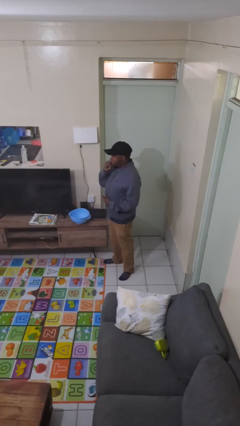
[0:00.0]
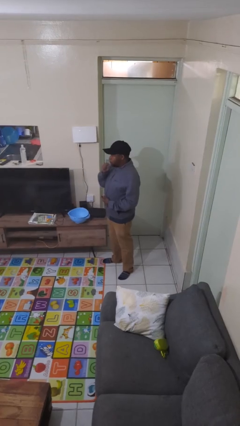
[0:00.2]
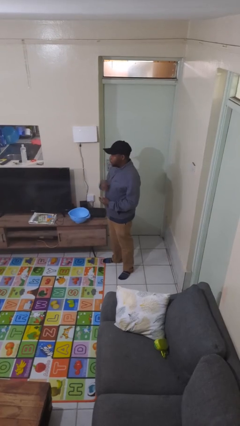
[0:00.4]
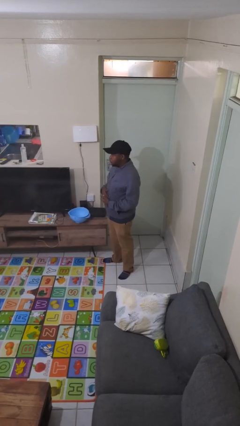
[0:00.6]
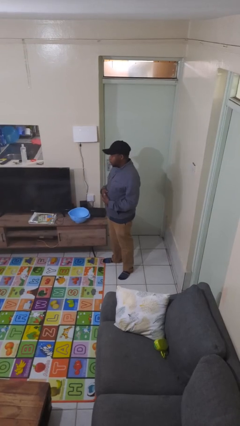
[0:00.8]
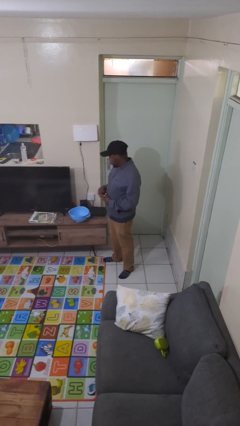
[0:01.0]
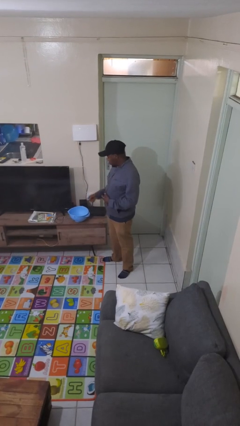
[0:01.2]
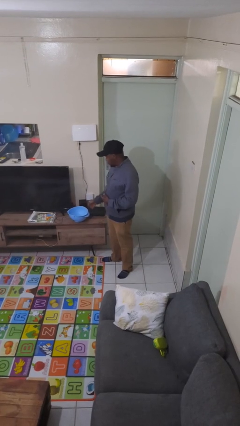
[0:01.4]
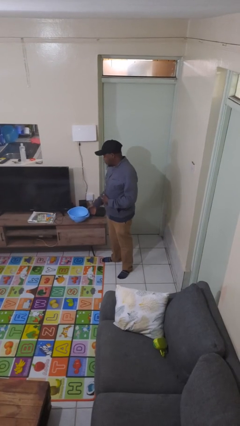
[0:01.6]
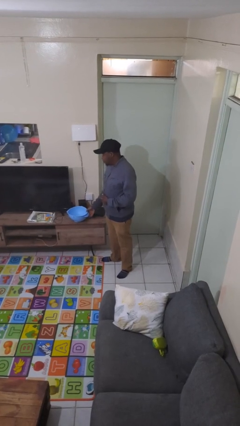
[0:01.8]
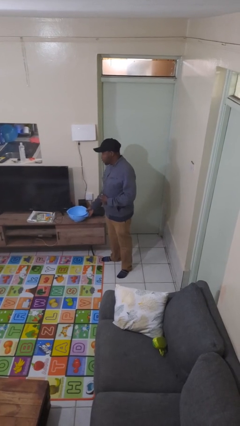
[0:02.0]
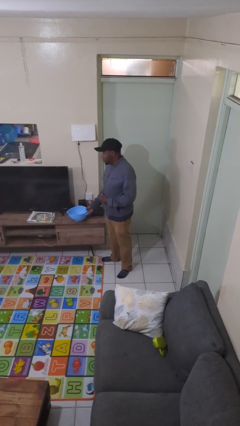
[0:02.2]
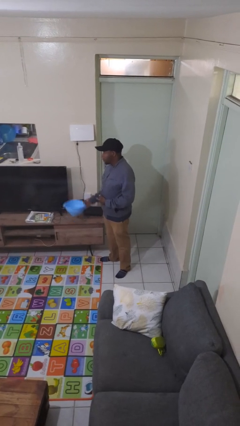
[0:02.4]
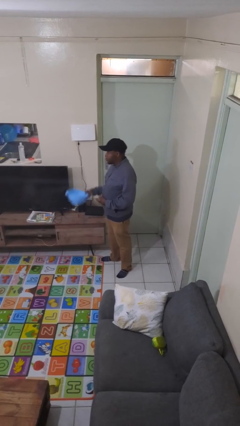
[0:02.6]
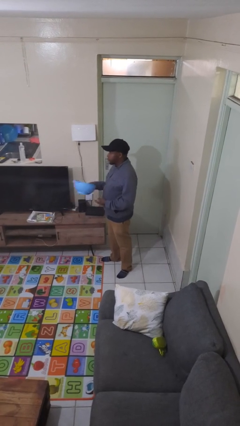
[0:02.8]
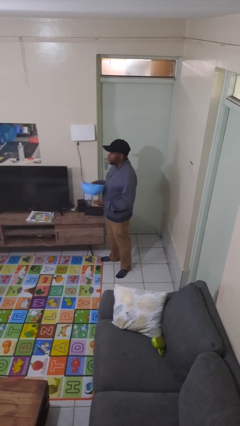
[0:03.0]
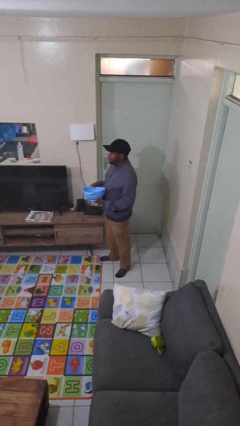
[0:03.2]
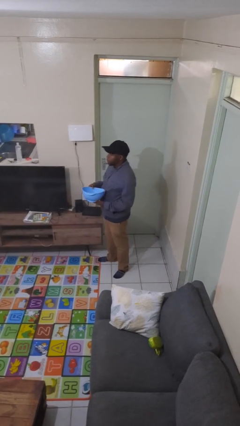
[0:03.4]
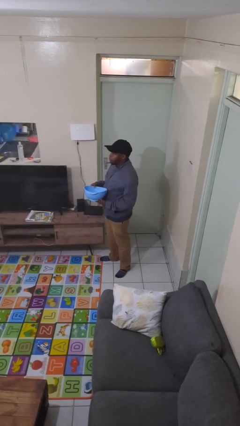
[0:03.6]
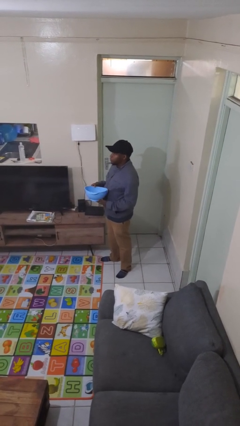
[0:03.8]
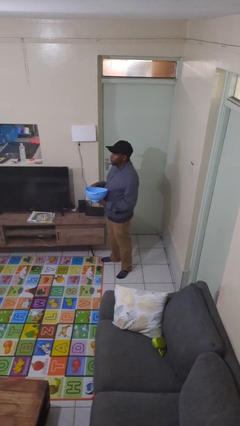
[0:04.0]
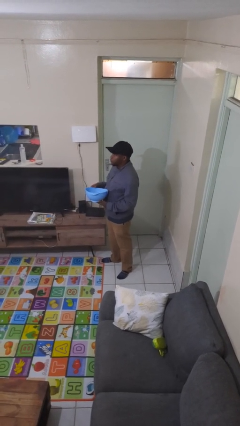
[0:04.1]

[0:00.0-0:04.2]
person picks up object from countertop

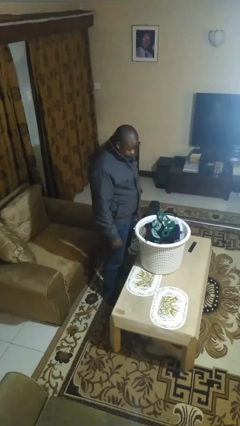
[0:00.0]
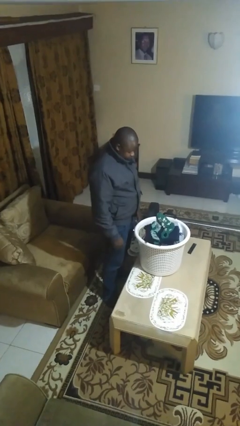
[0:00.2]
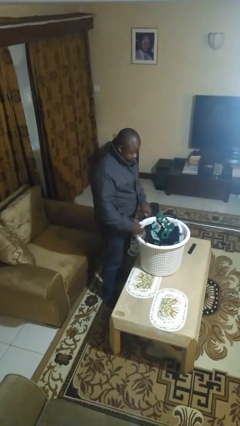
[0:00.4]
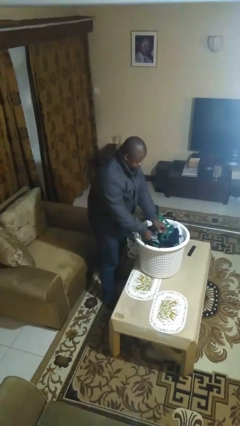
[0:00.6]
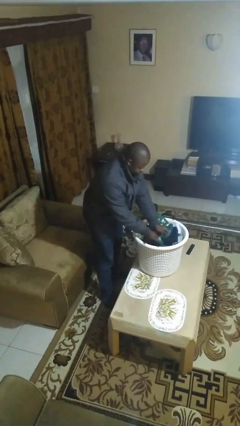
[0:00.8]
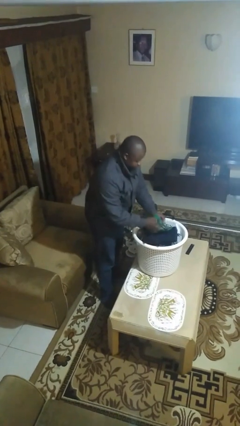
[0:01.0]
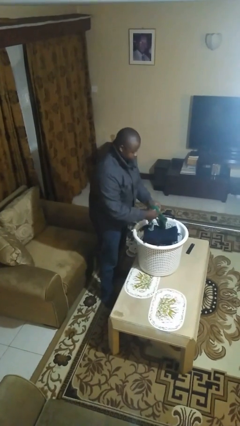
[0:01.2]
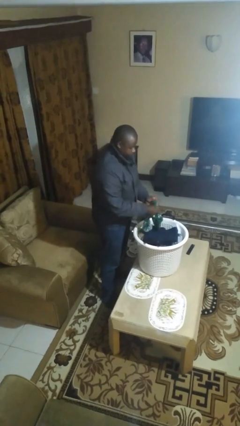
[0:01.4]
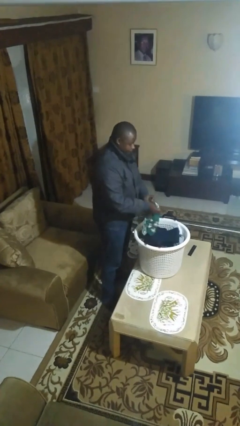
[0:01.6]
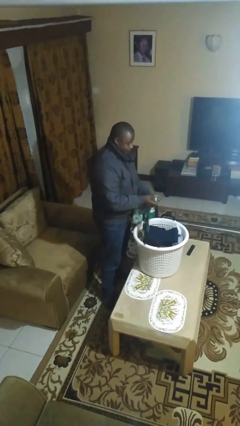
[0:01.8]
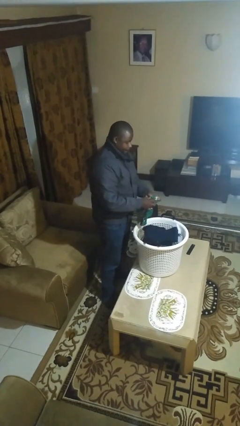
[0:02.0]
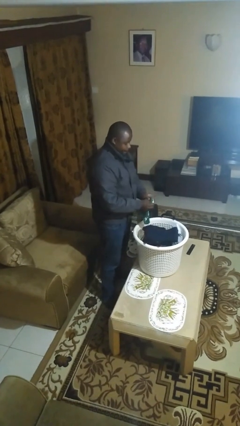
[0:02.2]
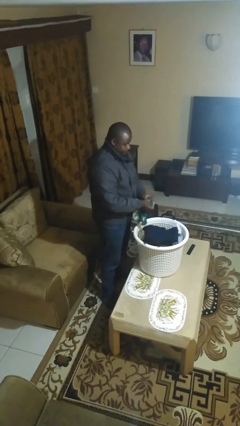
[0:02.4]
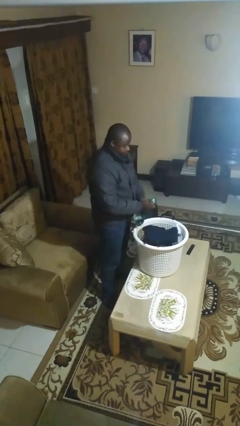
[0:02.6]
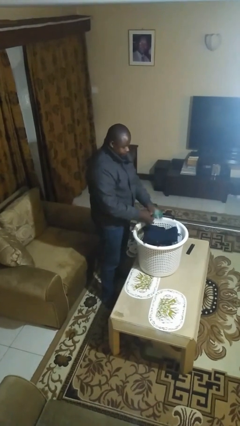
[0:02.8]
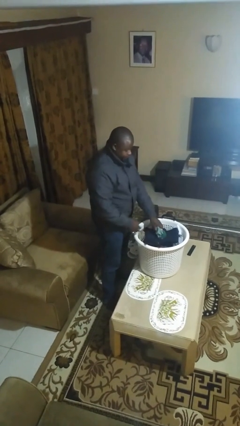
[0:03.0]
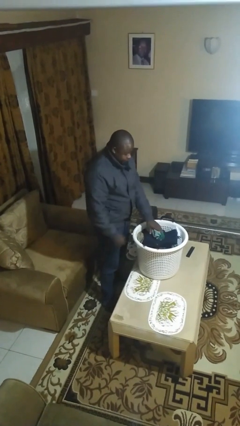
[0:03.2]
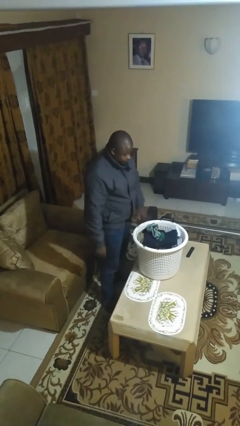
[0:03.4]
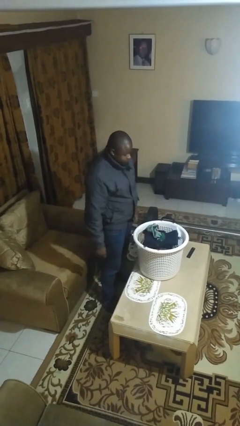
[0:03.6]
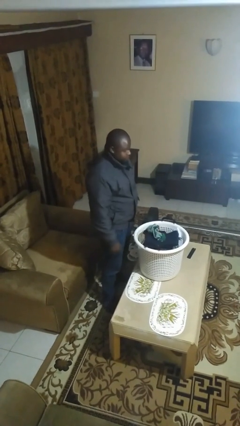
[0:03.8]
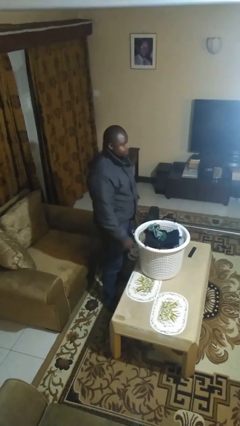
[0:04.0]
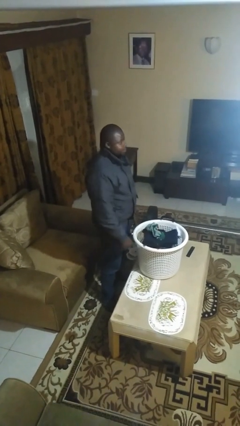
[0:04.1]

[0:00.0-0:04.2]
person folds socks

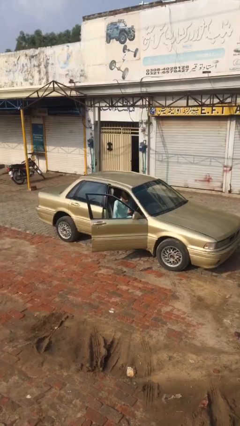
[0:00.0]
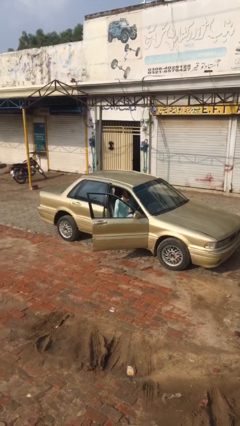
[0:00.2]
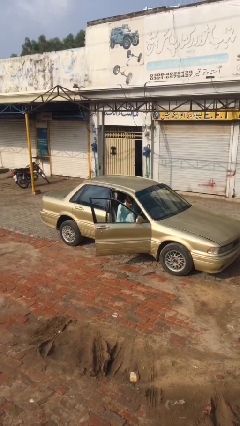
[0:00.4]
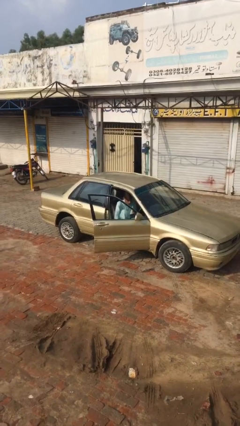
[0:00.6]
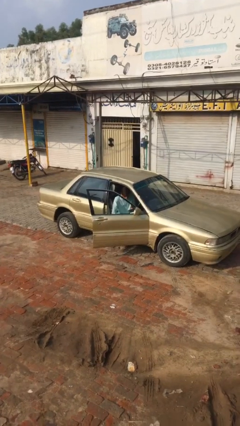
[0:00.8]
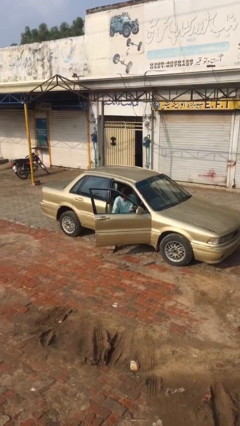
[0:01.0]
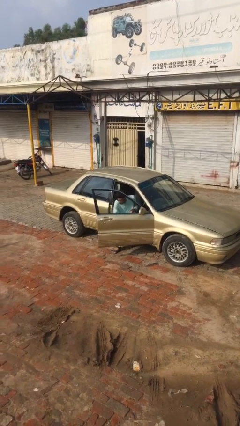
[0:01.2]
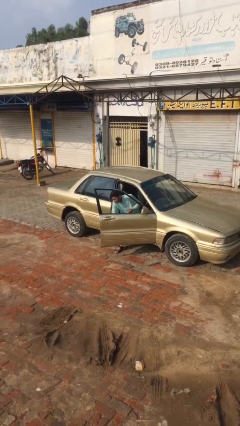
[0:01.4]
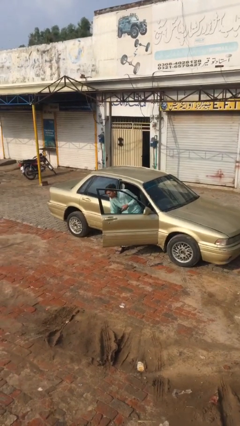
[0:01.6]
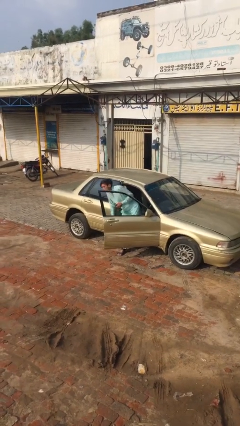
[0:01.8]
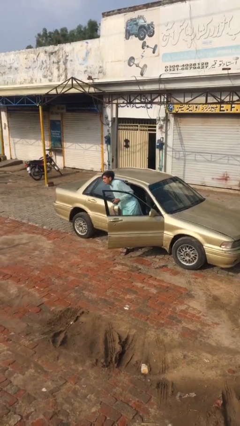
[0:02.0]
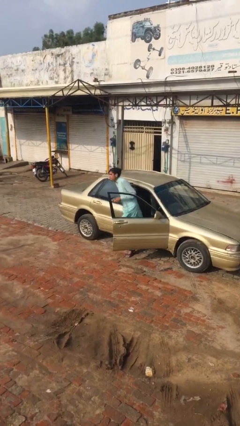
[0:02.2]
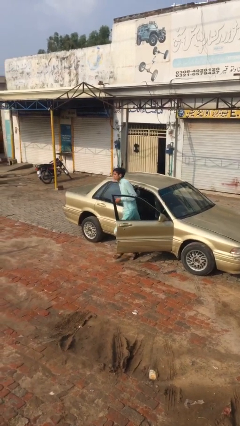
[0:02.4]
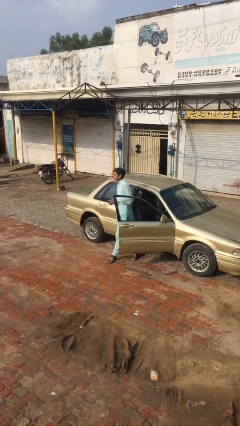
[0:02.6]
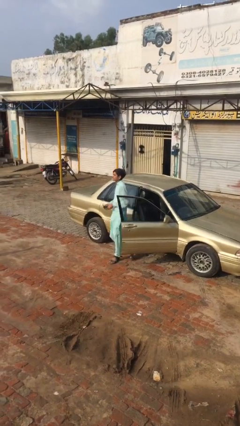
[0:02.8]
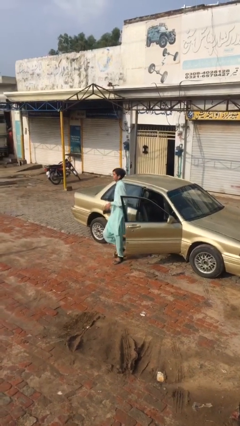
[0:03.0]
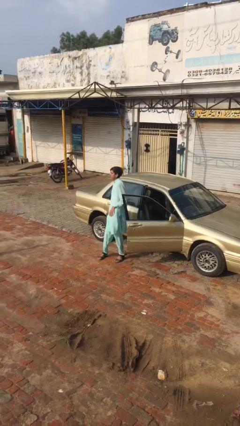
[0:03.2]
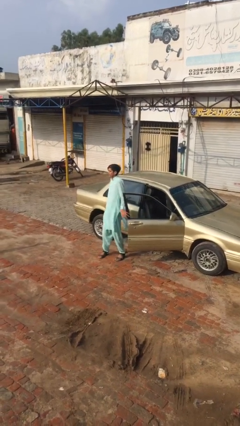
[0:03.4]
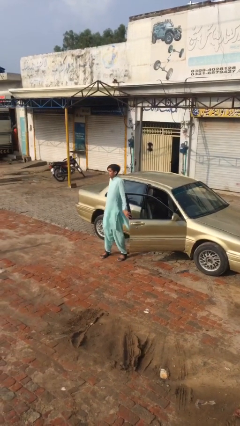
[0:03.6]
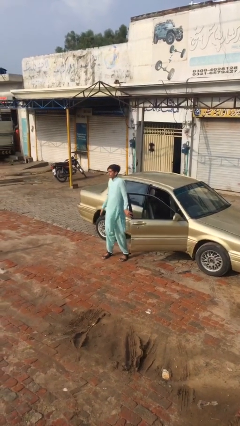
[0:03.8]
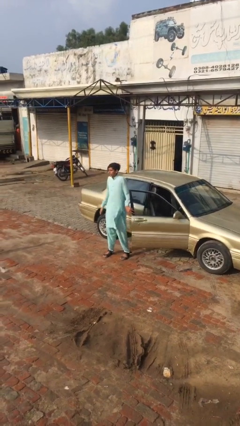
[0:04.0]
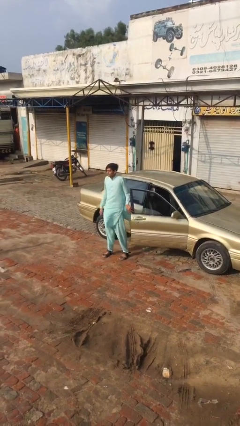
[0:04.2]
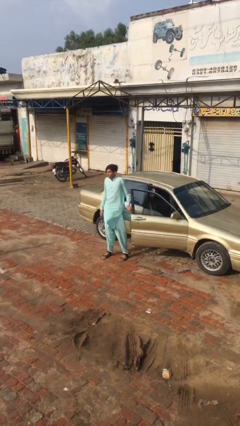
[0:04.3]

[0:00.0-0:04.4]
person exits car

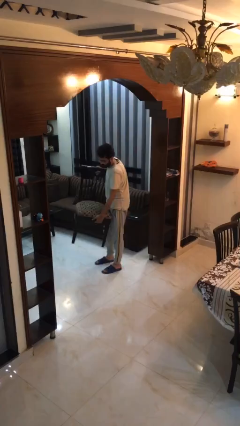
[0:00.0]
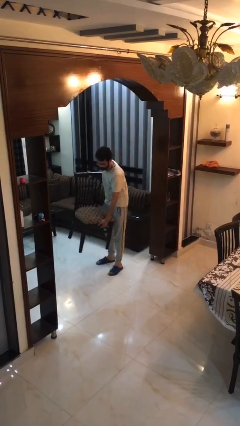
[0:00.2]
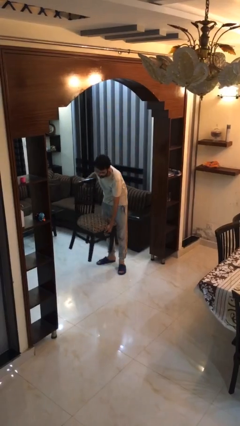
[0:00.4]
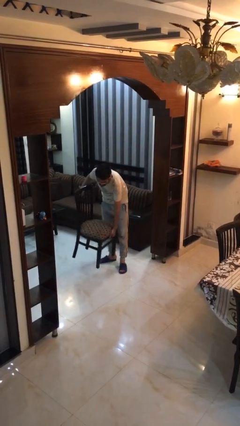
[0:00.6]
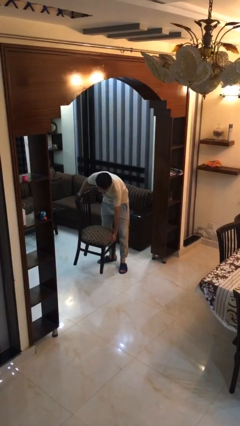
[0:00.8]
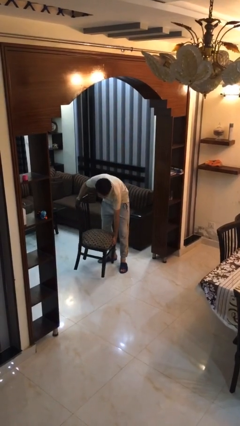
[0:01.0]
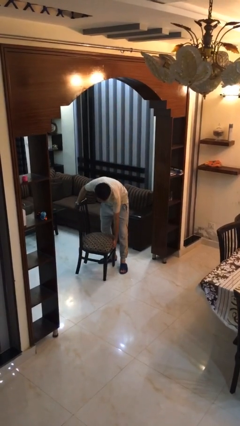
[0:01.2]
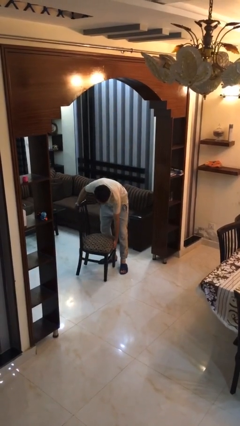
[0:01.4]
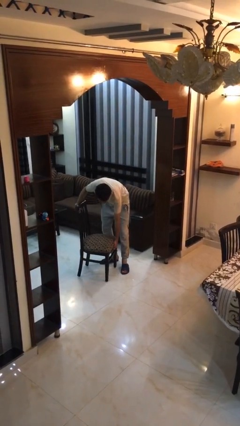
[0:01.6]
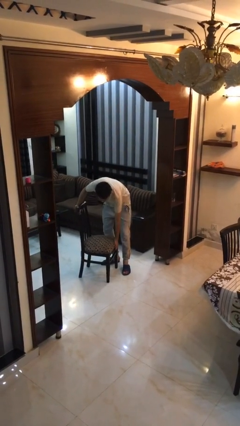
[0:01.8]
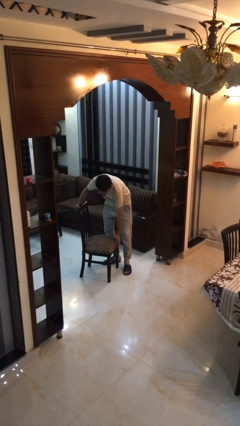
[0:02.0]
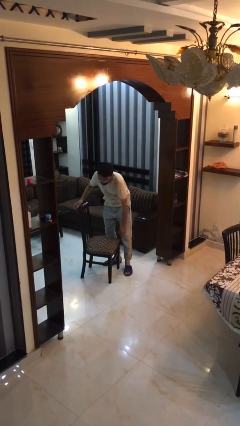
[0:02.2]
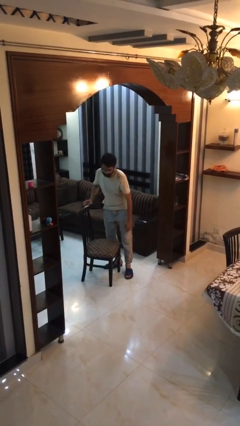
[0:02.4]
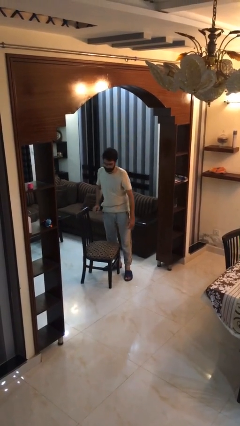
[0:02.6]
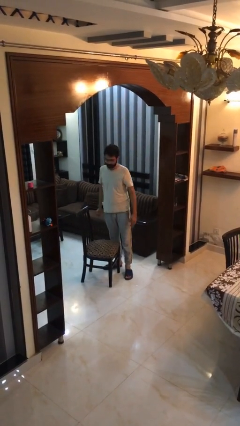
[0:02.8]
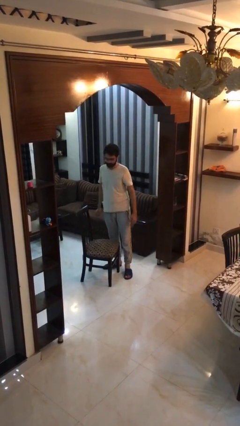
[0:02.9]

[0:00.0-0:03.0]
person puts down object on floor

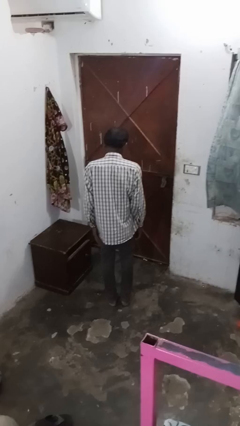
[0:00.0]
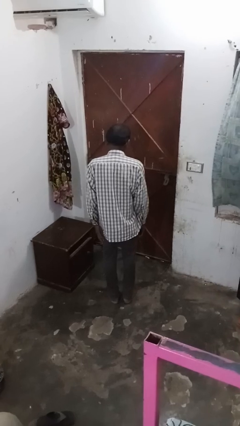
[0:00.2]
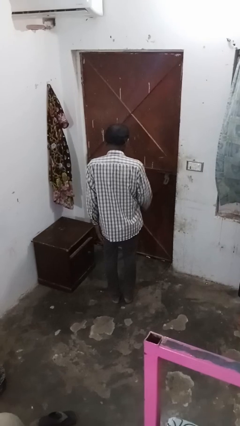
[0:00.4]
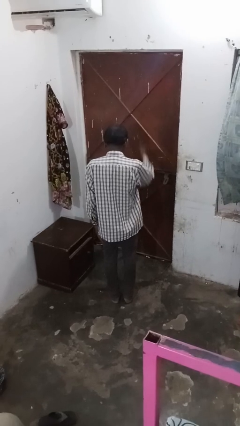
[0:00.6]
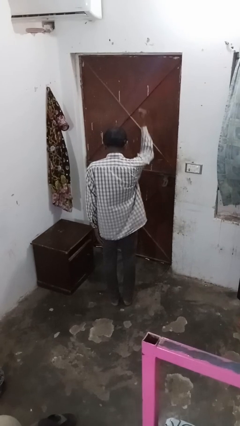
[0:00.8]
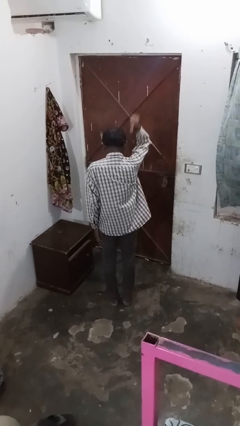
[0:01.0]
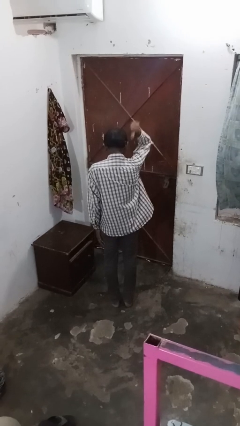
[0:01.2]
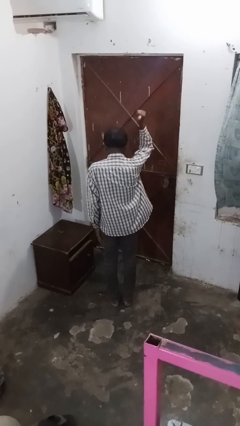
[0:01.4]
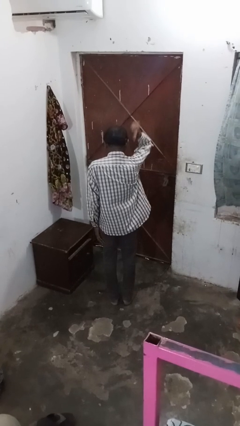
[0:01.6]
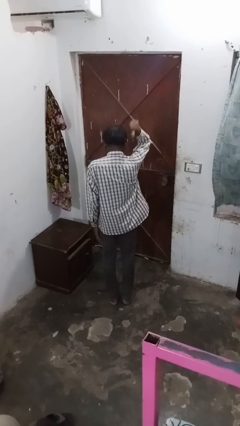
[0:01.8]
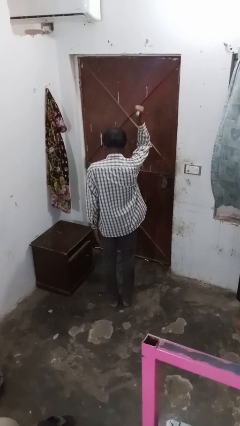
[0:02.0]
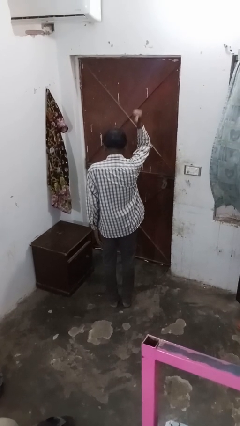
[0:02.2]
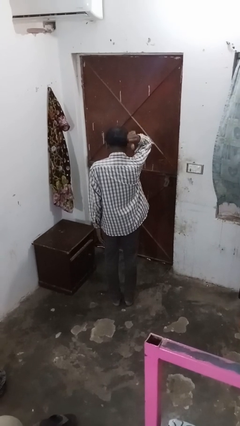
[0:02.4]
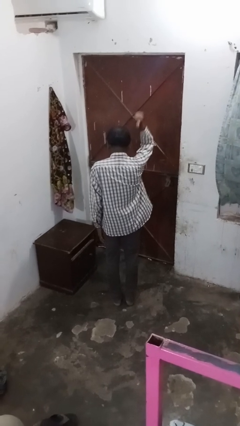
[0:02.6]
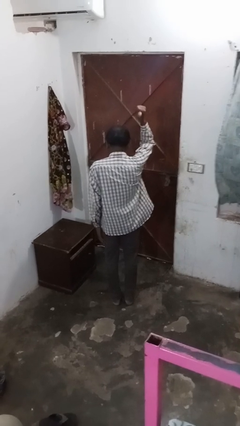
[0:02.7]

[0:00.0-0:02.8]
person gestures behind me
